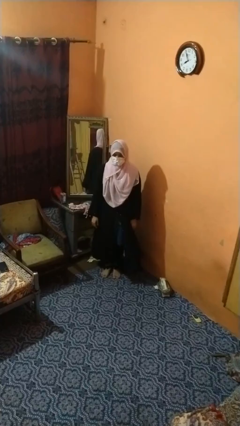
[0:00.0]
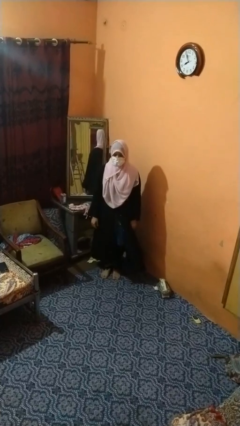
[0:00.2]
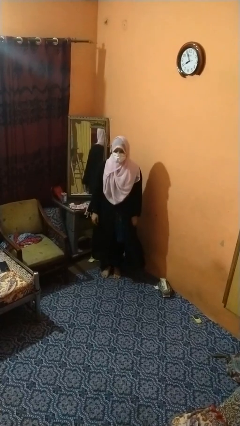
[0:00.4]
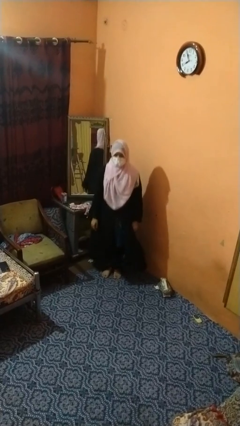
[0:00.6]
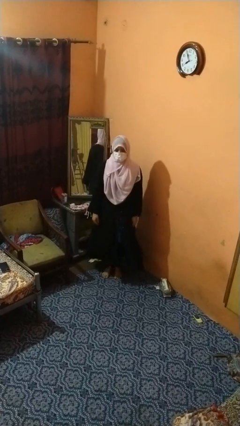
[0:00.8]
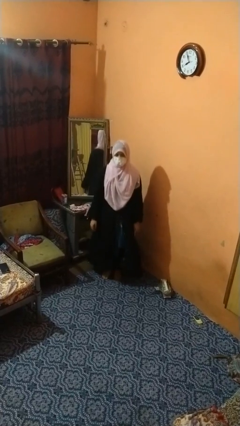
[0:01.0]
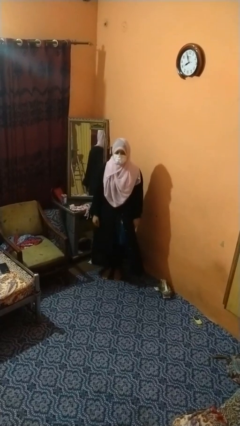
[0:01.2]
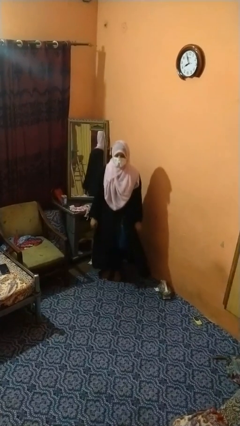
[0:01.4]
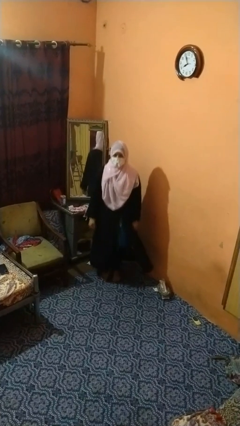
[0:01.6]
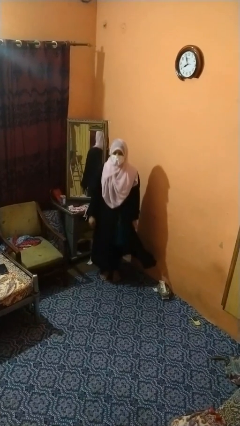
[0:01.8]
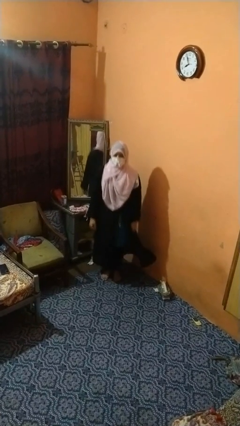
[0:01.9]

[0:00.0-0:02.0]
person jumps

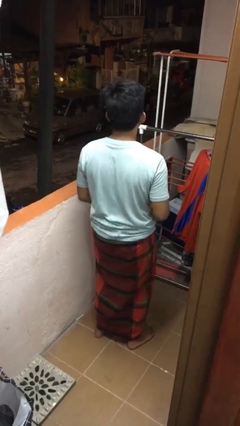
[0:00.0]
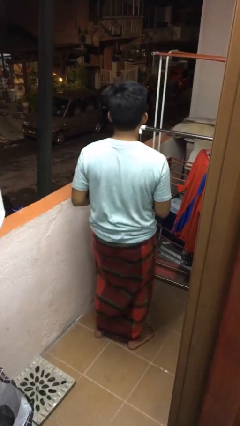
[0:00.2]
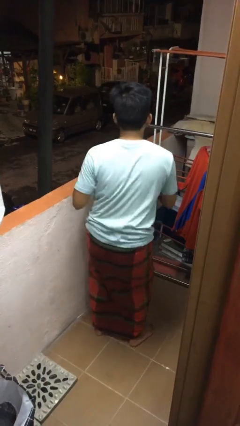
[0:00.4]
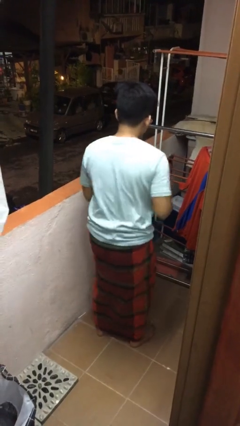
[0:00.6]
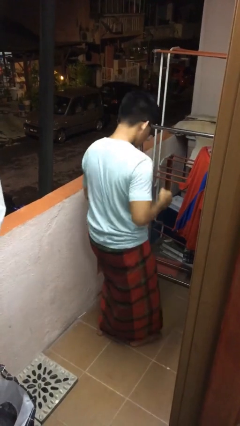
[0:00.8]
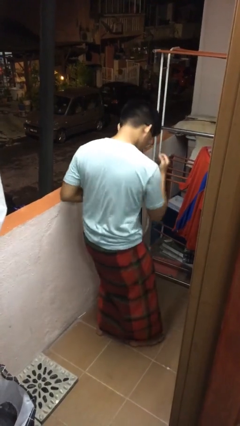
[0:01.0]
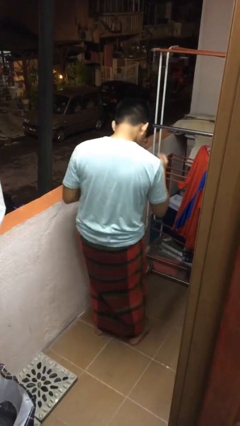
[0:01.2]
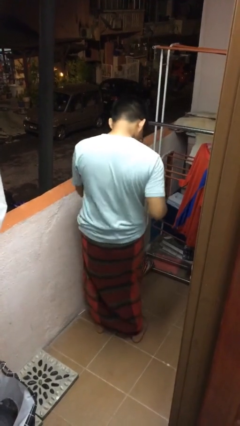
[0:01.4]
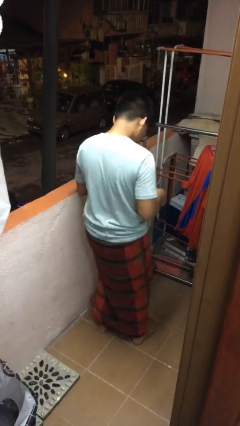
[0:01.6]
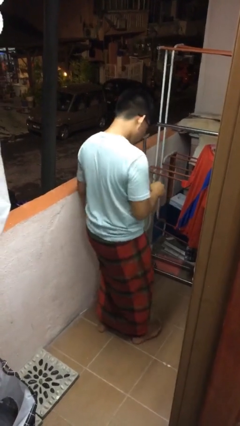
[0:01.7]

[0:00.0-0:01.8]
person dances in place

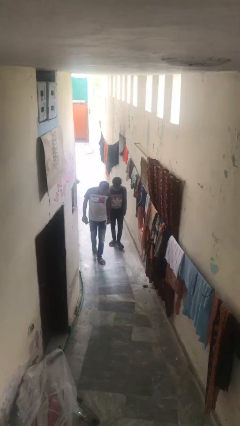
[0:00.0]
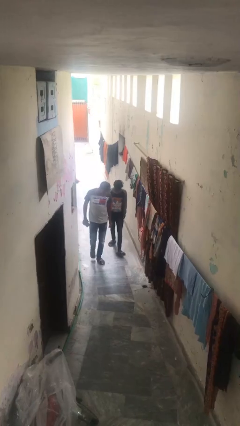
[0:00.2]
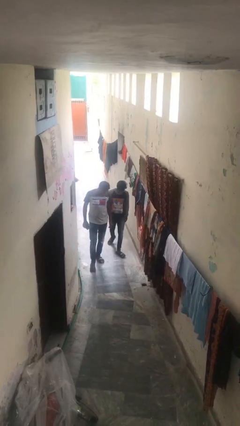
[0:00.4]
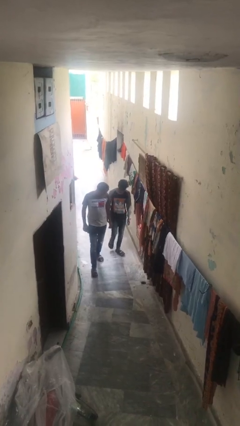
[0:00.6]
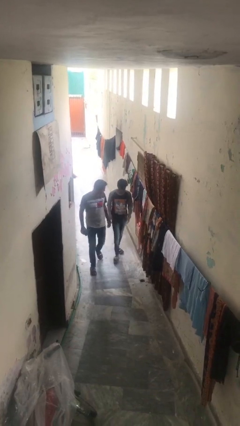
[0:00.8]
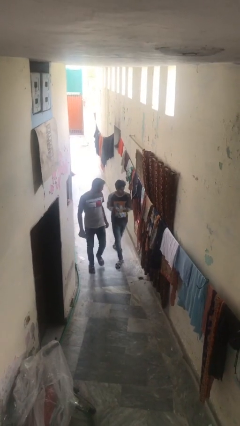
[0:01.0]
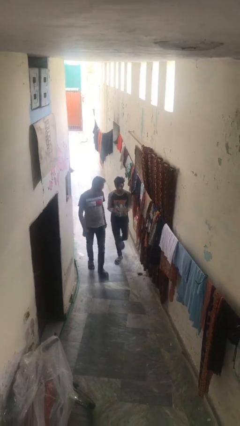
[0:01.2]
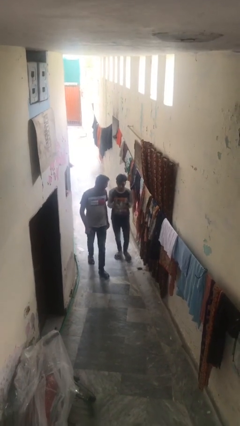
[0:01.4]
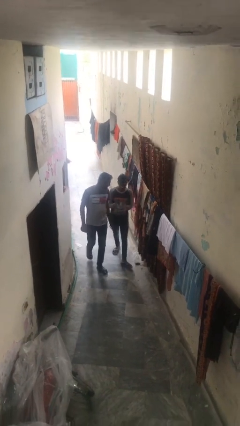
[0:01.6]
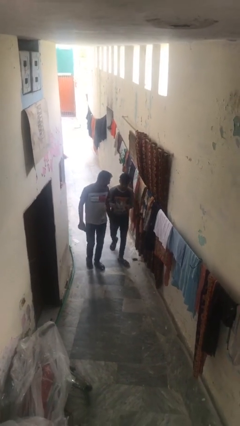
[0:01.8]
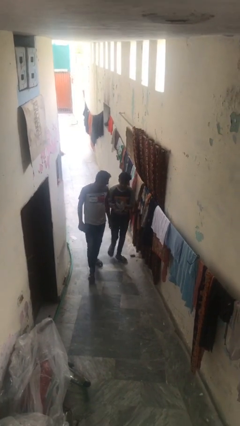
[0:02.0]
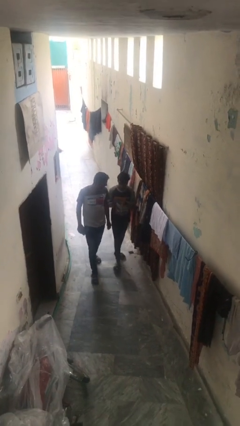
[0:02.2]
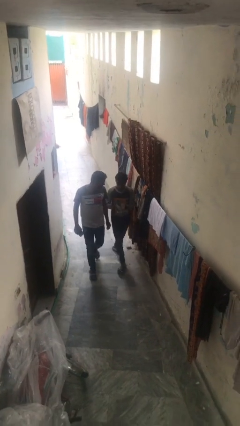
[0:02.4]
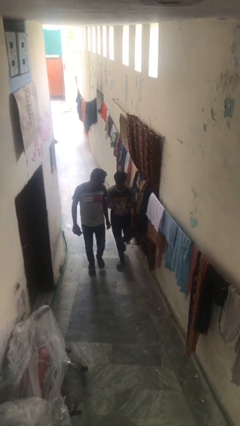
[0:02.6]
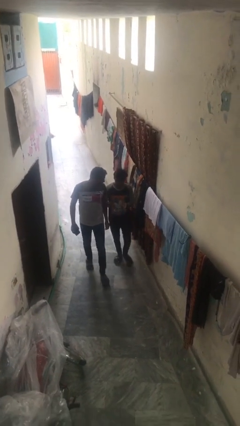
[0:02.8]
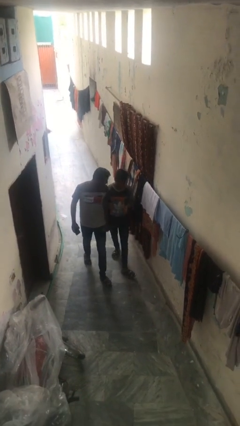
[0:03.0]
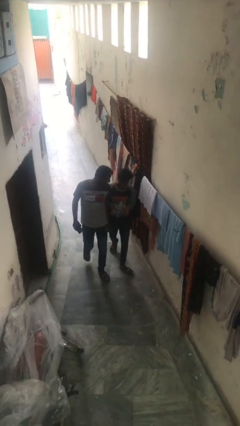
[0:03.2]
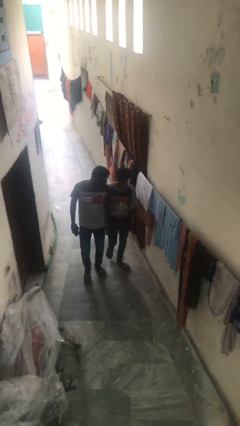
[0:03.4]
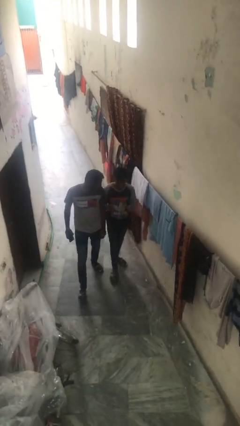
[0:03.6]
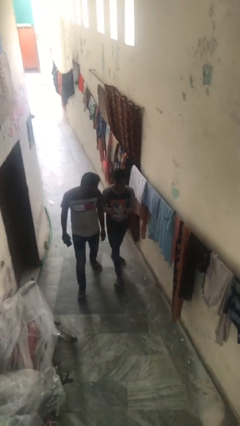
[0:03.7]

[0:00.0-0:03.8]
person talks to person

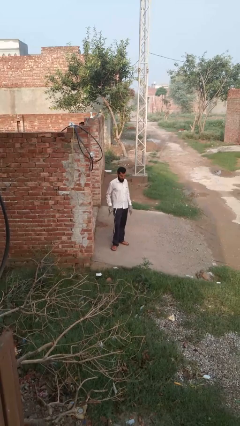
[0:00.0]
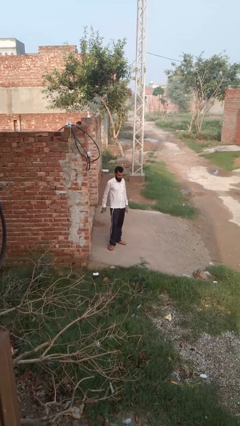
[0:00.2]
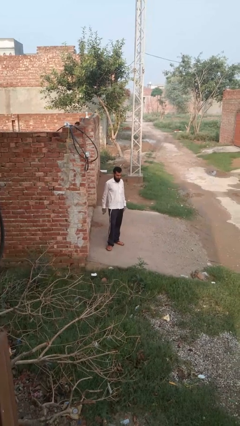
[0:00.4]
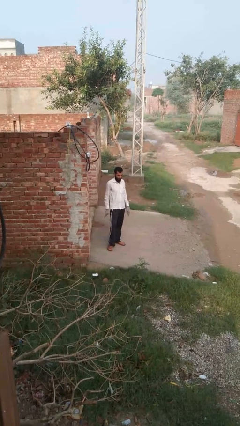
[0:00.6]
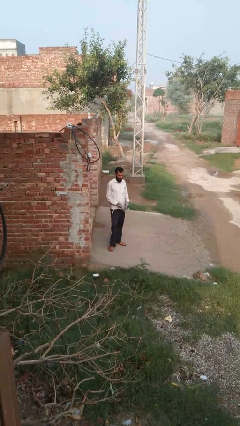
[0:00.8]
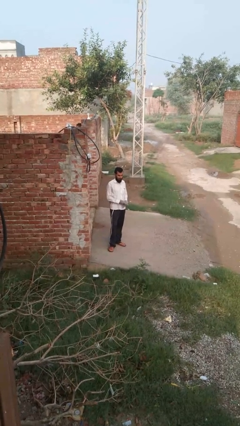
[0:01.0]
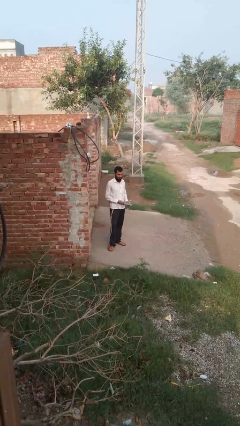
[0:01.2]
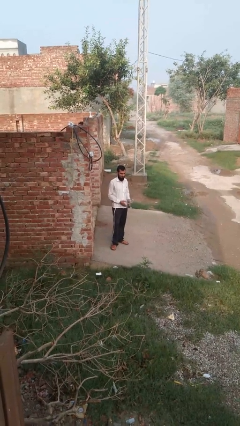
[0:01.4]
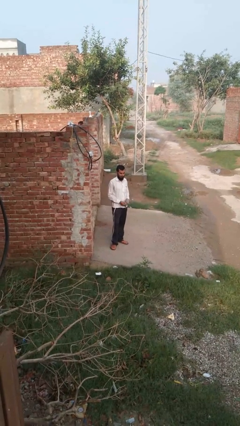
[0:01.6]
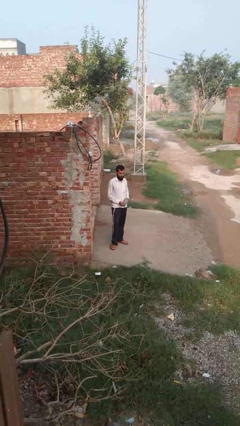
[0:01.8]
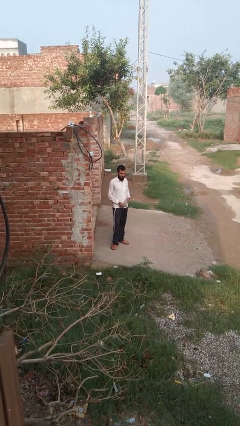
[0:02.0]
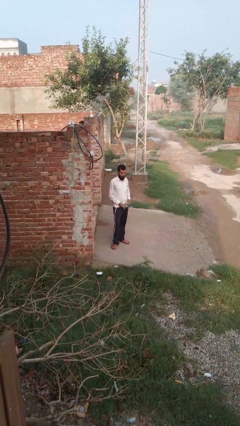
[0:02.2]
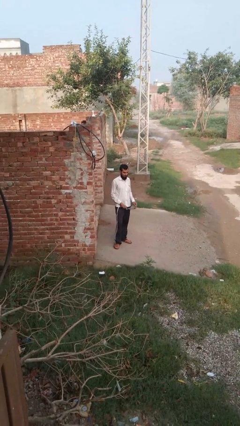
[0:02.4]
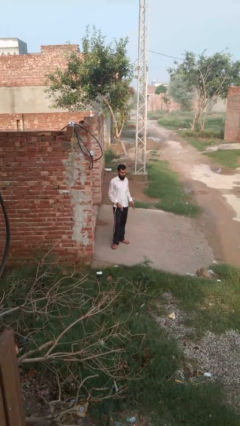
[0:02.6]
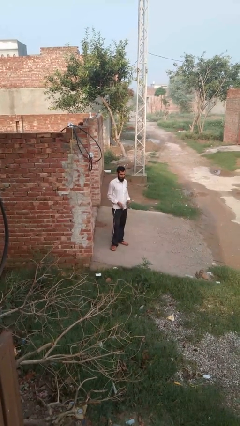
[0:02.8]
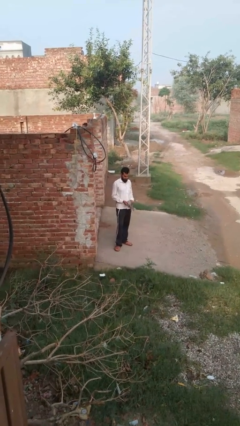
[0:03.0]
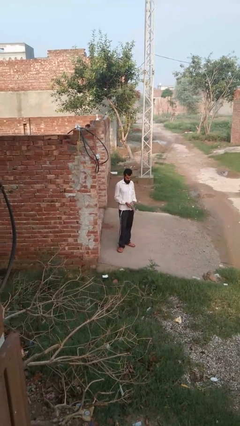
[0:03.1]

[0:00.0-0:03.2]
person takes off gloves

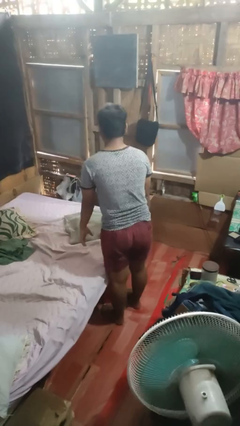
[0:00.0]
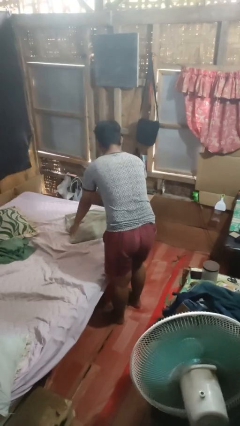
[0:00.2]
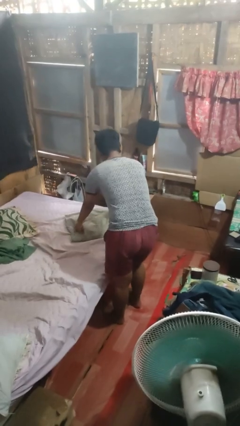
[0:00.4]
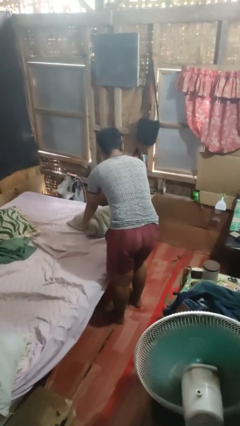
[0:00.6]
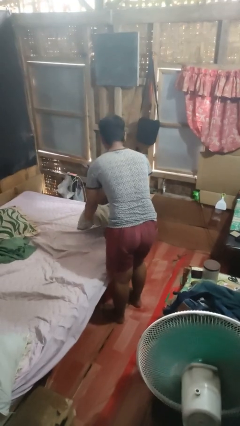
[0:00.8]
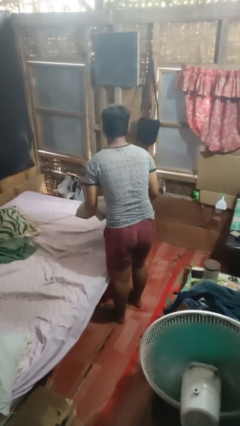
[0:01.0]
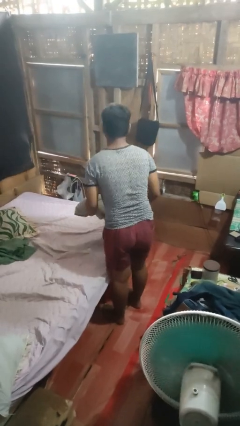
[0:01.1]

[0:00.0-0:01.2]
person picks up object from bed

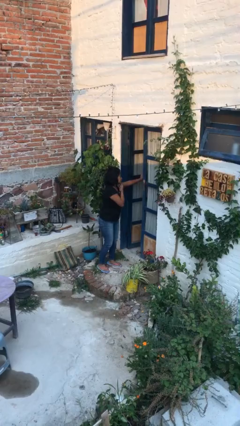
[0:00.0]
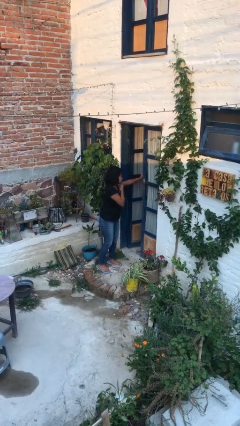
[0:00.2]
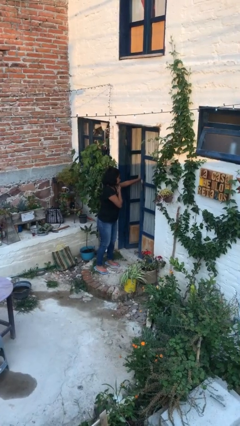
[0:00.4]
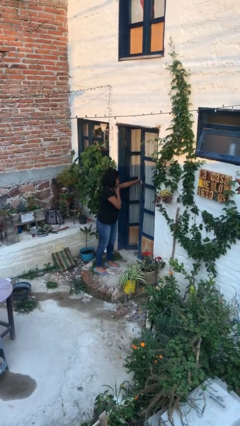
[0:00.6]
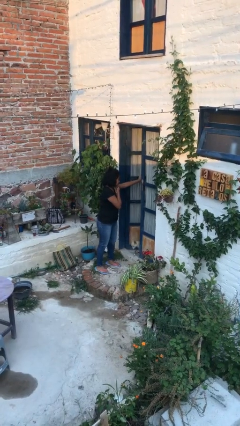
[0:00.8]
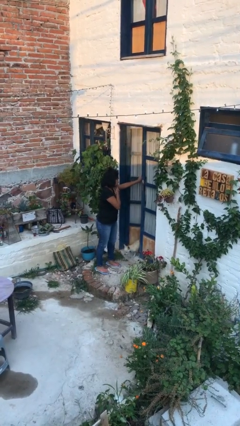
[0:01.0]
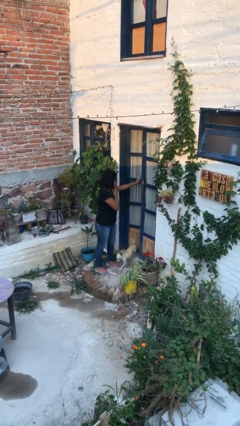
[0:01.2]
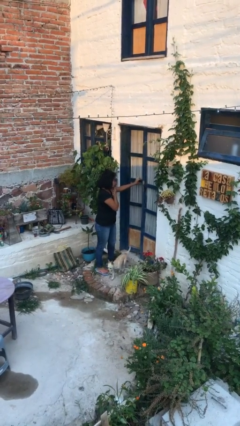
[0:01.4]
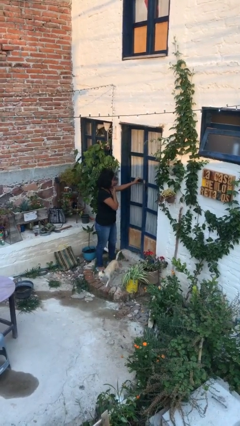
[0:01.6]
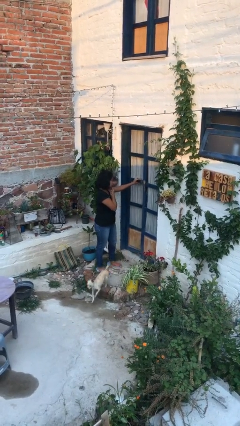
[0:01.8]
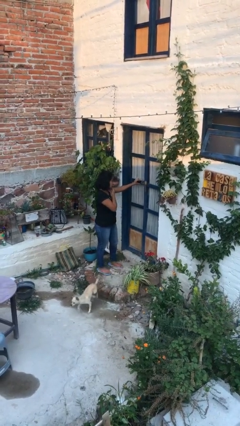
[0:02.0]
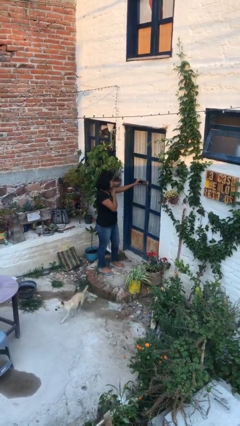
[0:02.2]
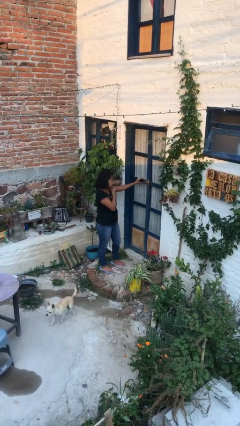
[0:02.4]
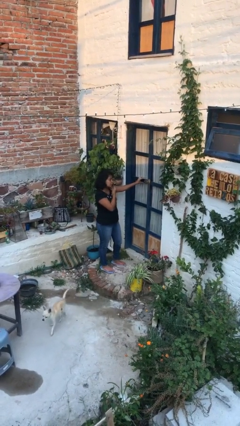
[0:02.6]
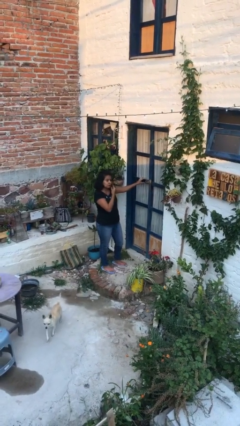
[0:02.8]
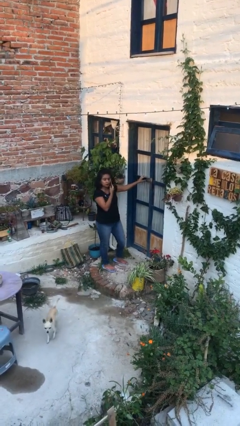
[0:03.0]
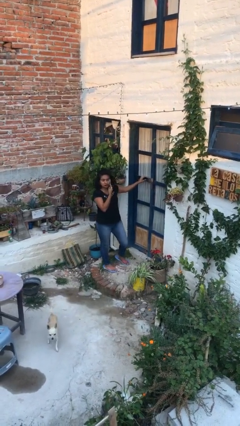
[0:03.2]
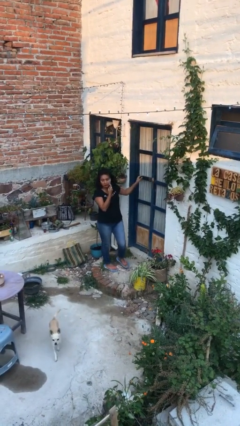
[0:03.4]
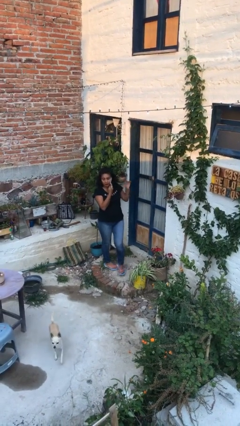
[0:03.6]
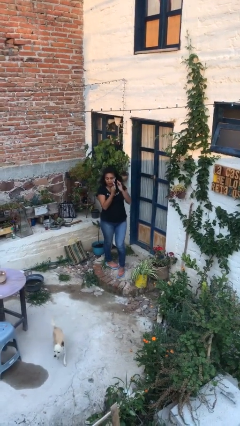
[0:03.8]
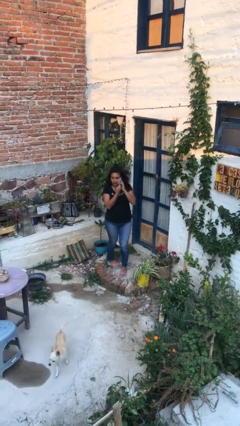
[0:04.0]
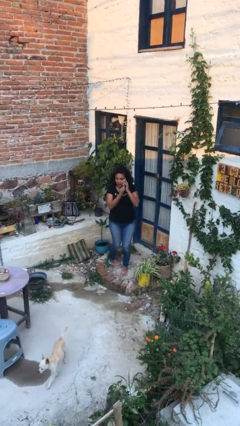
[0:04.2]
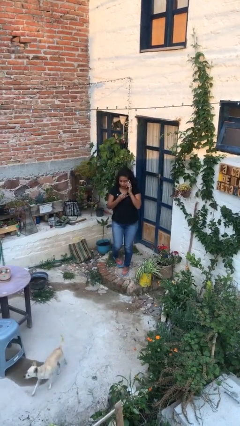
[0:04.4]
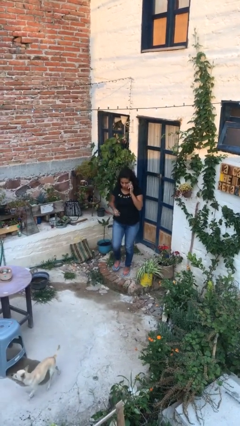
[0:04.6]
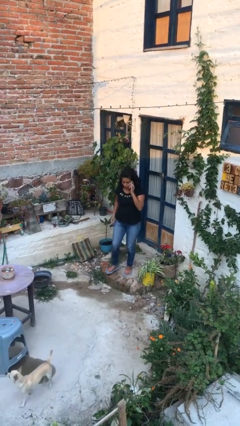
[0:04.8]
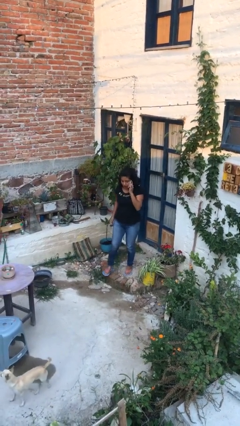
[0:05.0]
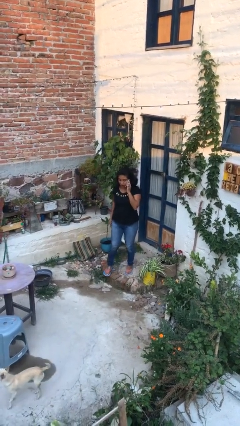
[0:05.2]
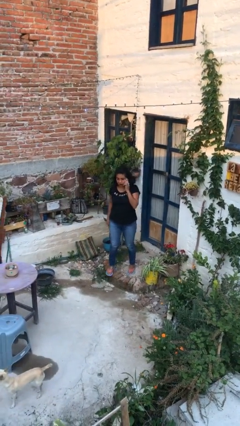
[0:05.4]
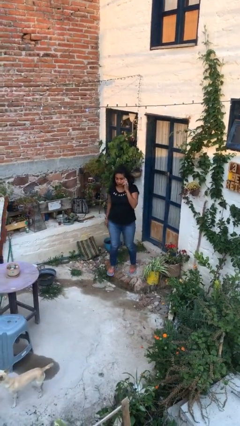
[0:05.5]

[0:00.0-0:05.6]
person closes facility door
